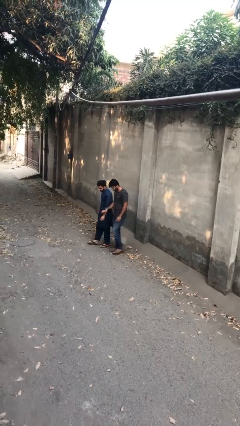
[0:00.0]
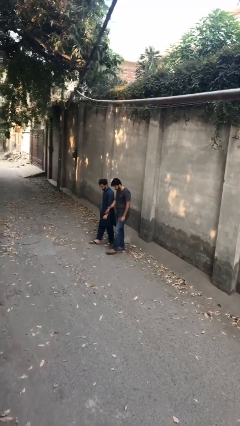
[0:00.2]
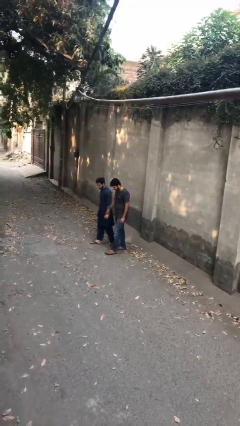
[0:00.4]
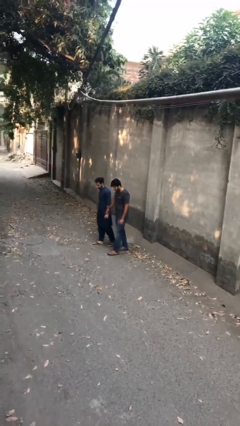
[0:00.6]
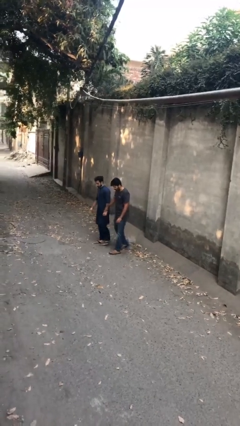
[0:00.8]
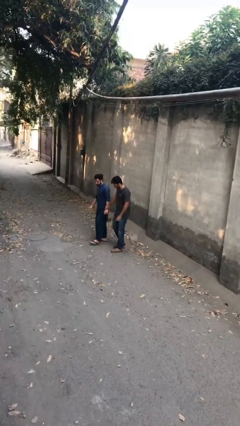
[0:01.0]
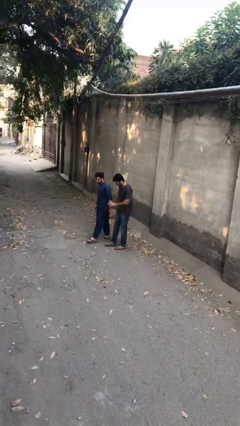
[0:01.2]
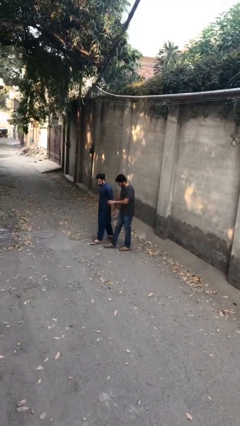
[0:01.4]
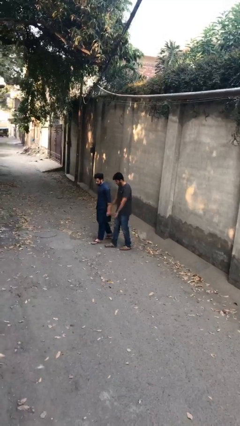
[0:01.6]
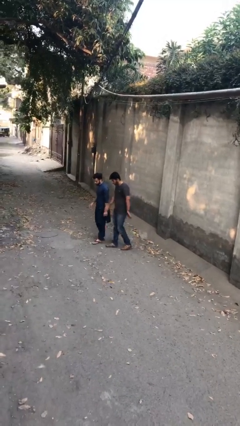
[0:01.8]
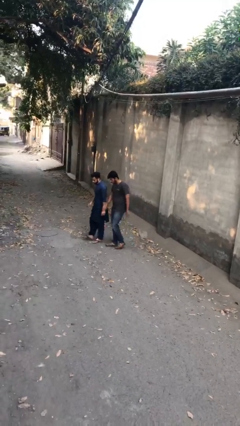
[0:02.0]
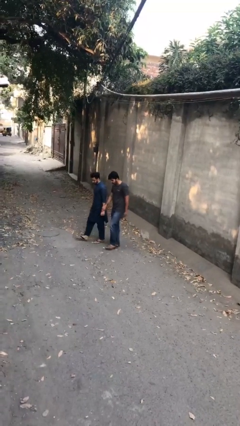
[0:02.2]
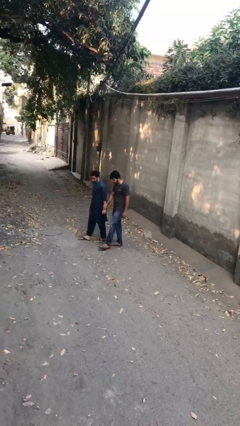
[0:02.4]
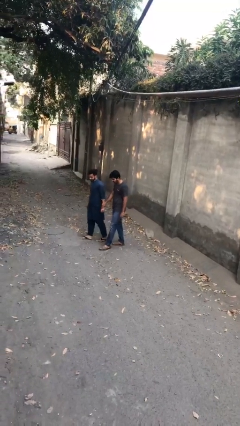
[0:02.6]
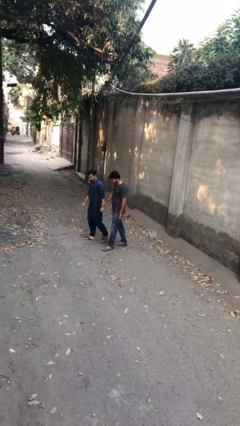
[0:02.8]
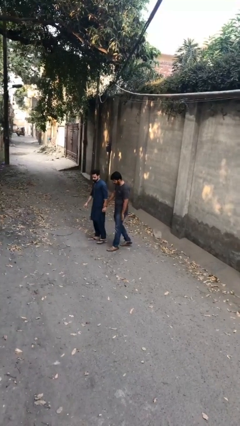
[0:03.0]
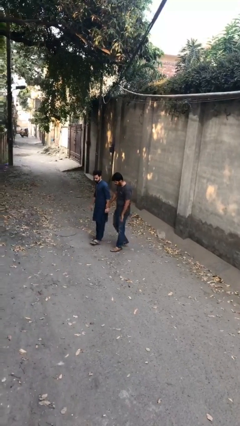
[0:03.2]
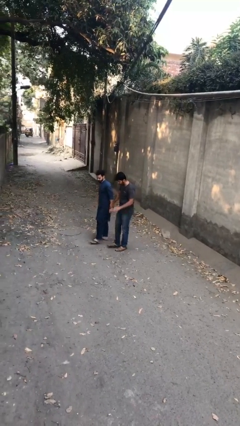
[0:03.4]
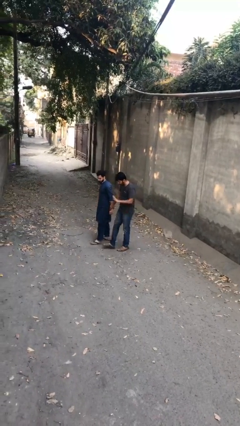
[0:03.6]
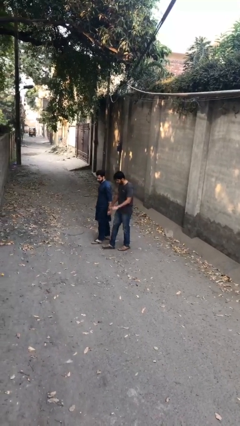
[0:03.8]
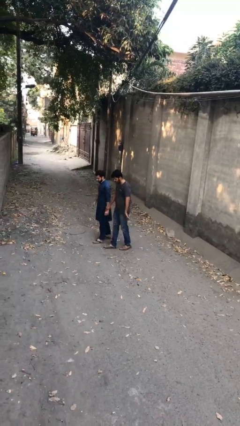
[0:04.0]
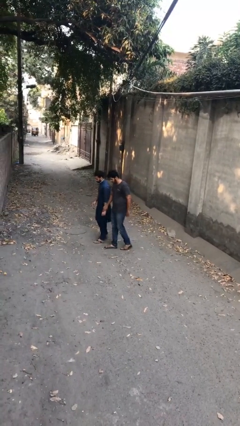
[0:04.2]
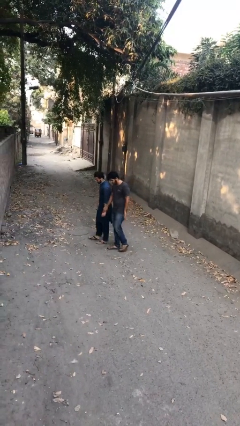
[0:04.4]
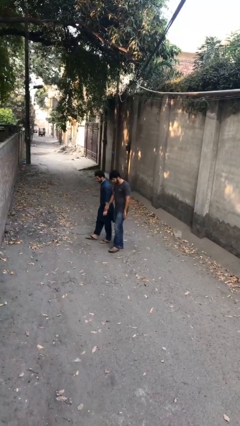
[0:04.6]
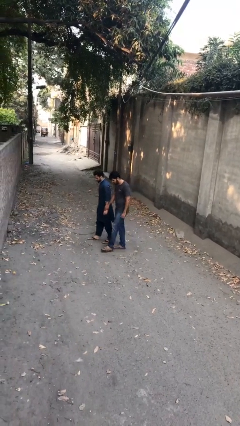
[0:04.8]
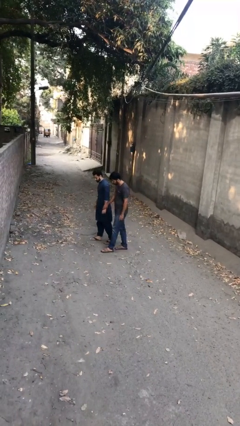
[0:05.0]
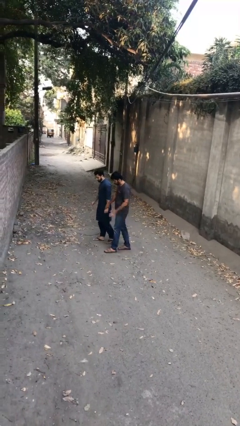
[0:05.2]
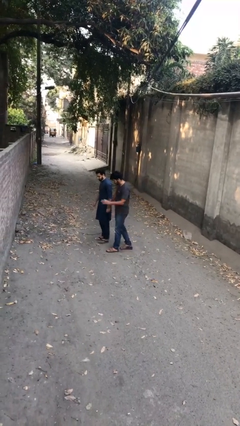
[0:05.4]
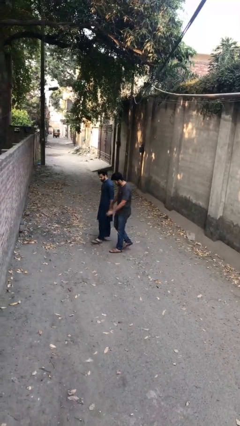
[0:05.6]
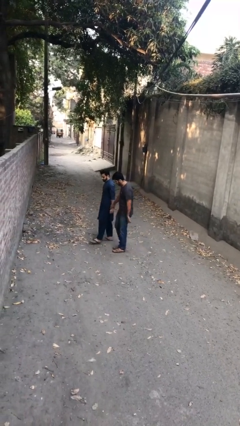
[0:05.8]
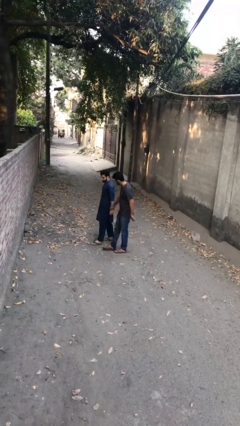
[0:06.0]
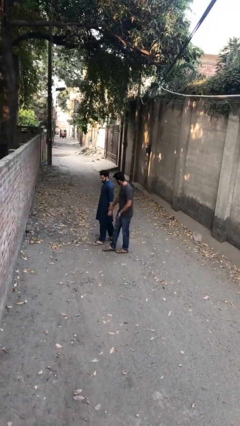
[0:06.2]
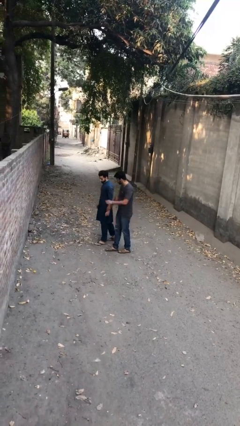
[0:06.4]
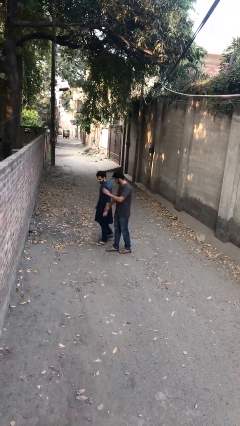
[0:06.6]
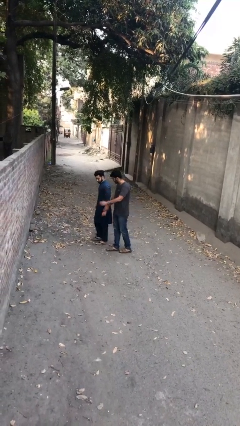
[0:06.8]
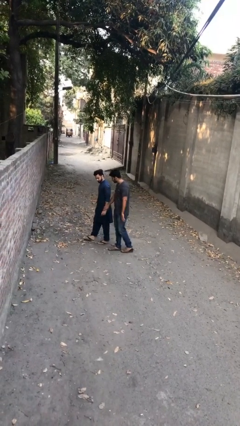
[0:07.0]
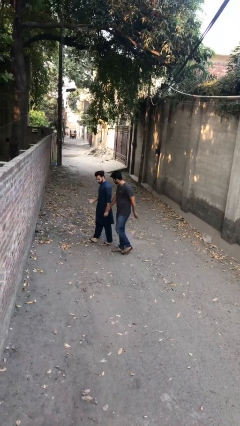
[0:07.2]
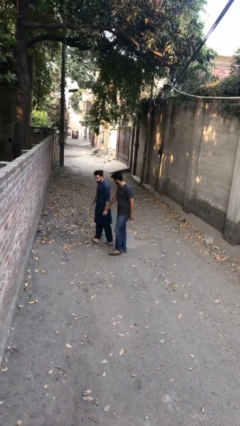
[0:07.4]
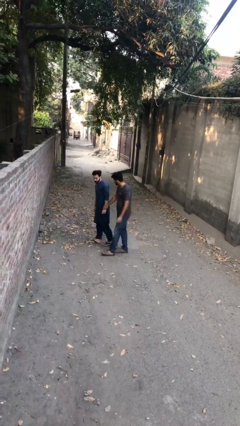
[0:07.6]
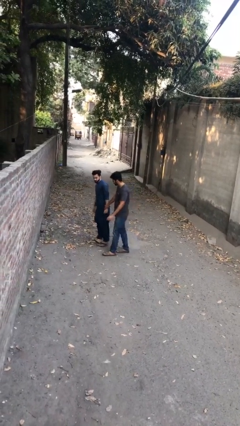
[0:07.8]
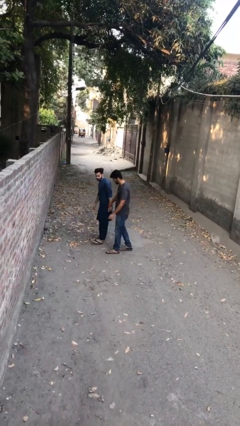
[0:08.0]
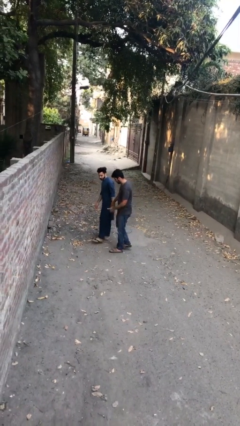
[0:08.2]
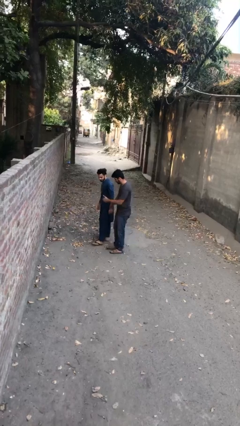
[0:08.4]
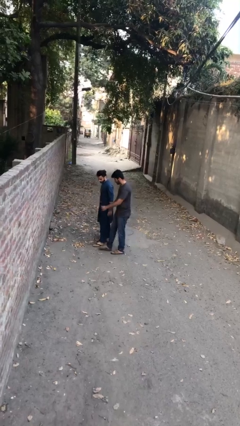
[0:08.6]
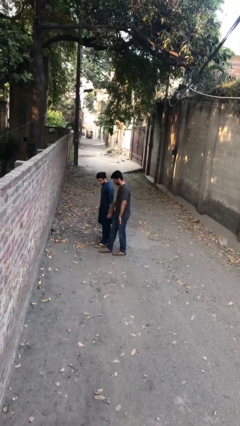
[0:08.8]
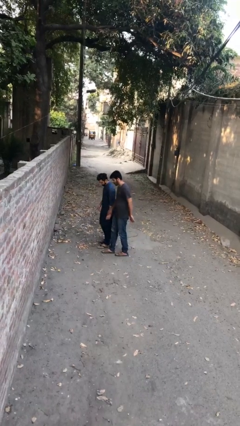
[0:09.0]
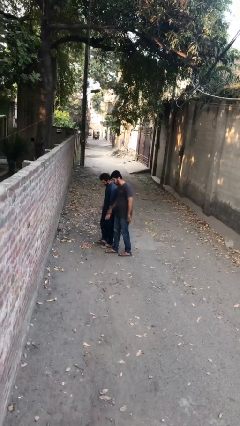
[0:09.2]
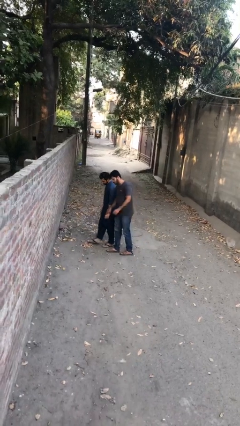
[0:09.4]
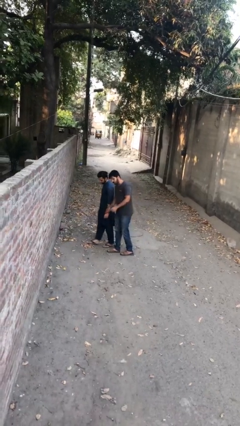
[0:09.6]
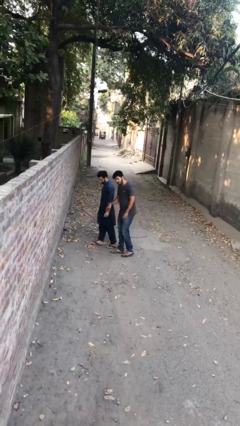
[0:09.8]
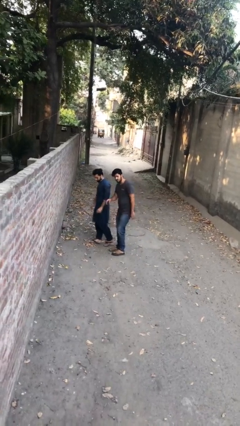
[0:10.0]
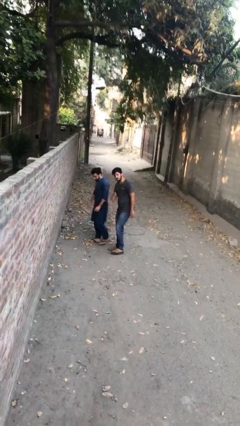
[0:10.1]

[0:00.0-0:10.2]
person holds hand

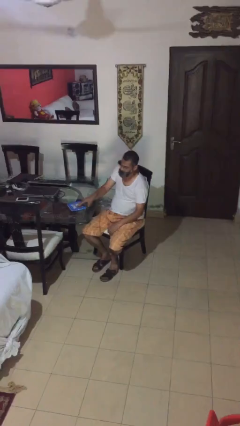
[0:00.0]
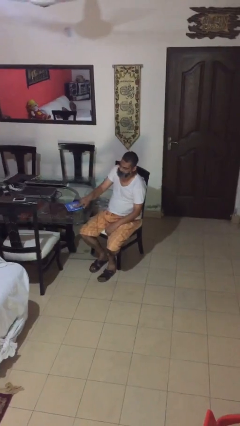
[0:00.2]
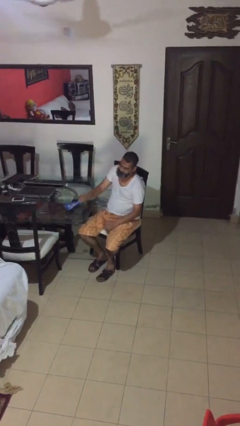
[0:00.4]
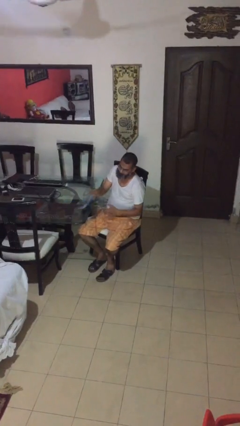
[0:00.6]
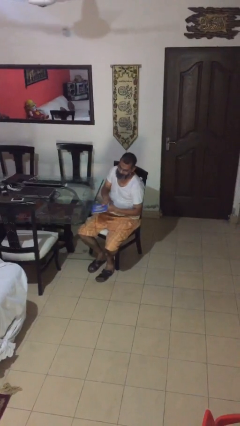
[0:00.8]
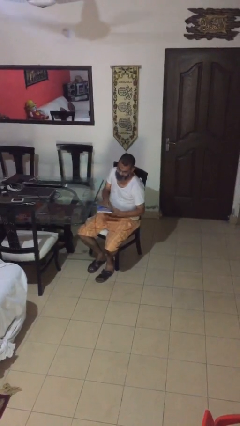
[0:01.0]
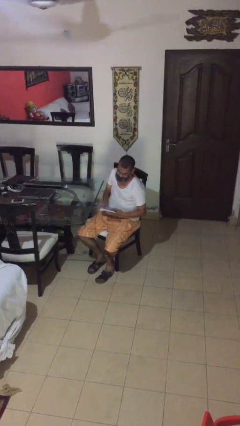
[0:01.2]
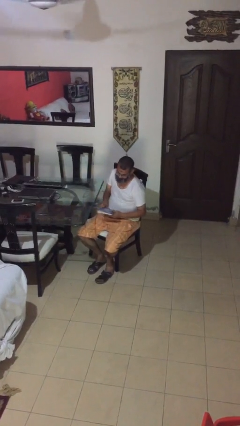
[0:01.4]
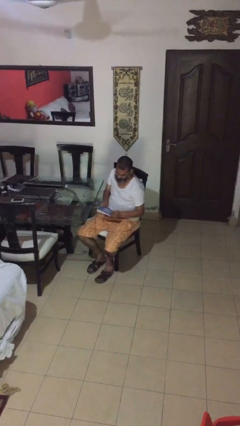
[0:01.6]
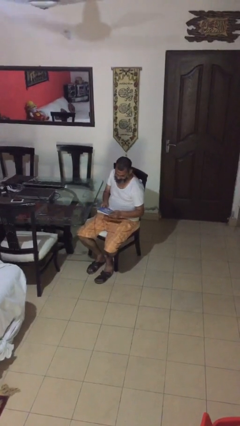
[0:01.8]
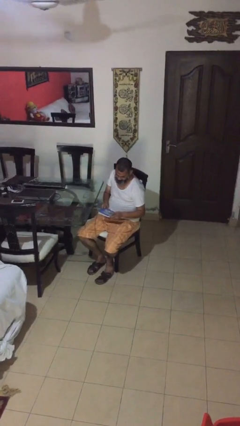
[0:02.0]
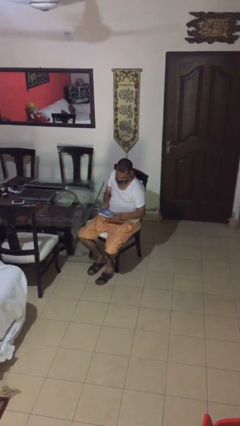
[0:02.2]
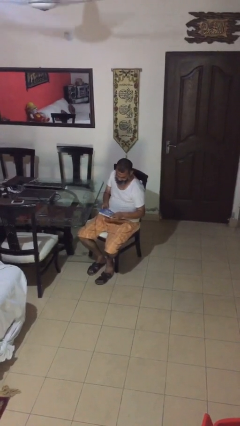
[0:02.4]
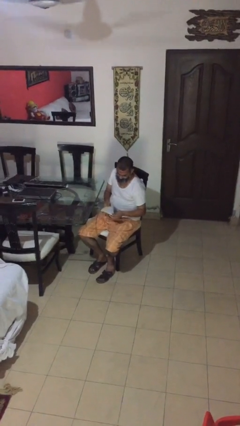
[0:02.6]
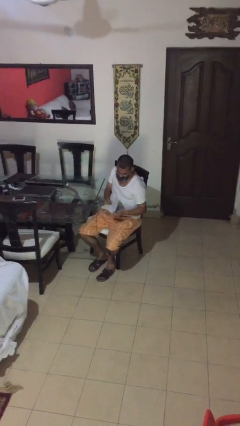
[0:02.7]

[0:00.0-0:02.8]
person picks up object from table

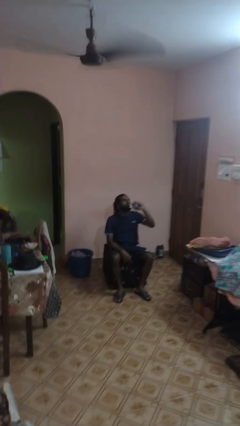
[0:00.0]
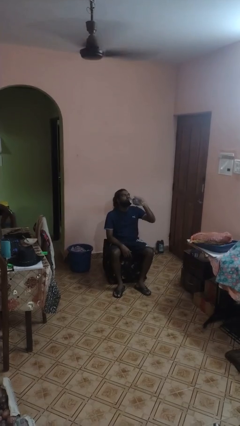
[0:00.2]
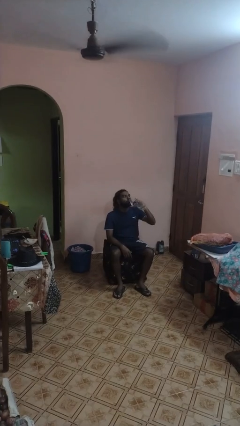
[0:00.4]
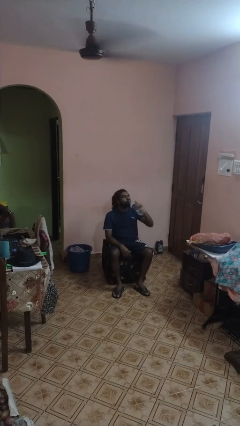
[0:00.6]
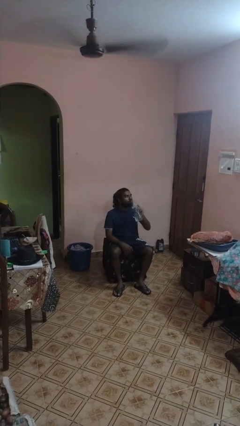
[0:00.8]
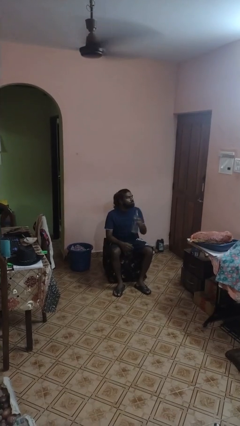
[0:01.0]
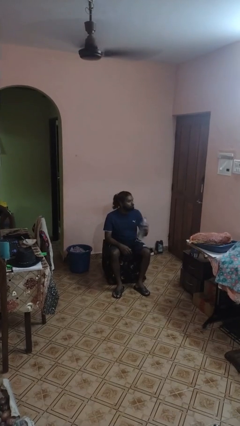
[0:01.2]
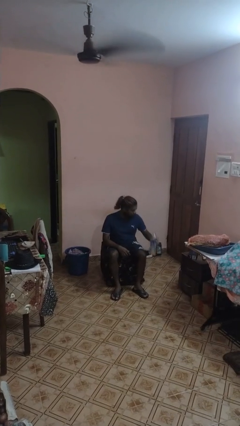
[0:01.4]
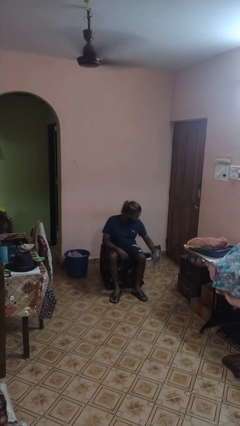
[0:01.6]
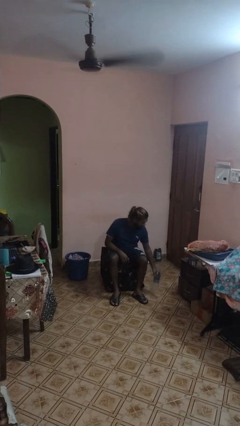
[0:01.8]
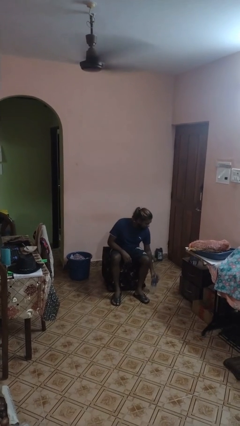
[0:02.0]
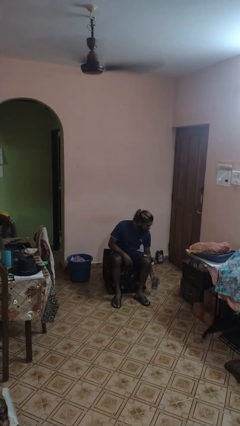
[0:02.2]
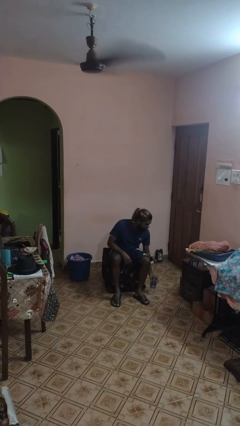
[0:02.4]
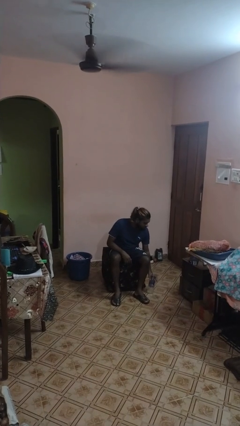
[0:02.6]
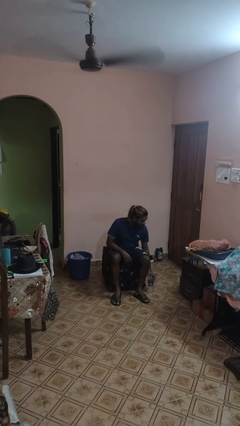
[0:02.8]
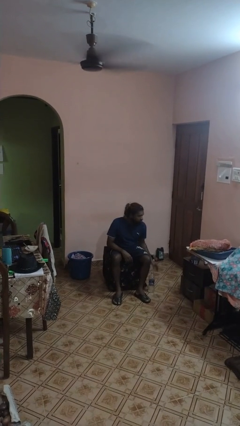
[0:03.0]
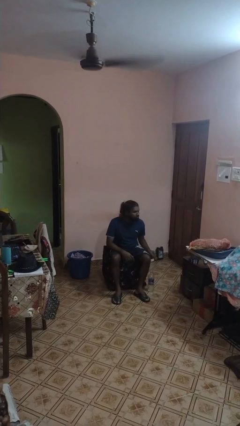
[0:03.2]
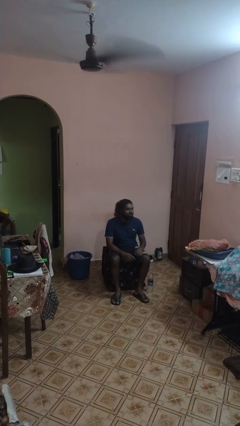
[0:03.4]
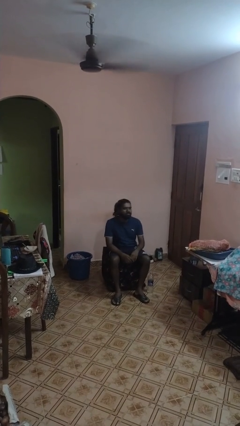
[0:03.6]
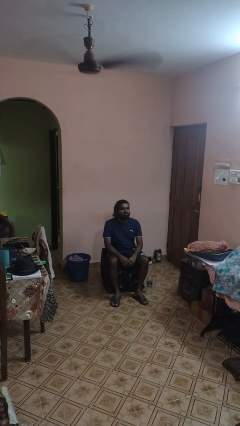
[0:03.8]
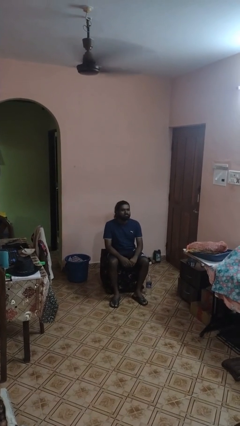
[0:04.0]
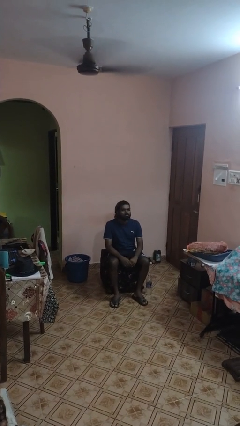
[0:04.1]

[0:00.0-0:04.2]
person drinks from bottle

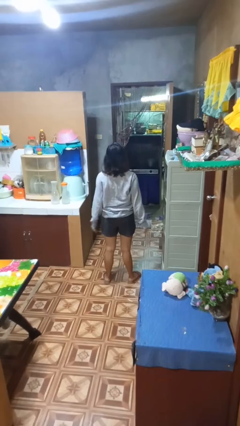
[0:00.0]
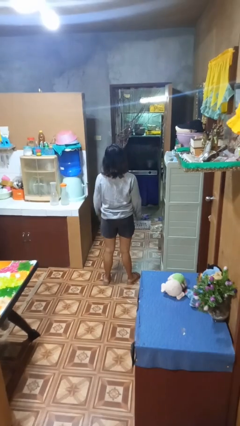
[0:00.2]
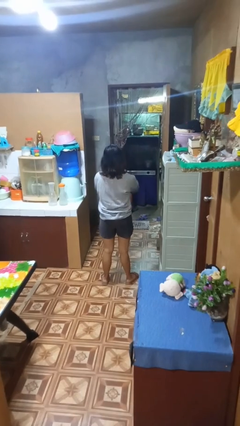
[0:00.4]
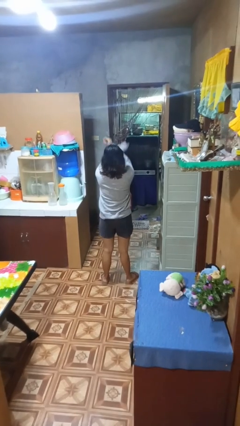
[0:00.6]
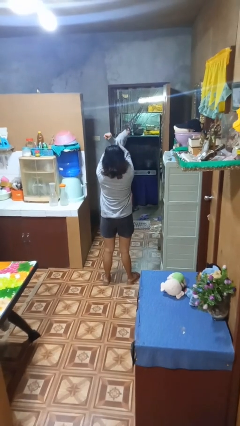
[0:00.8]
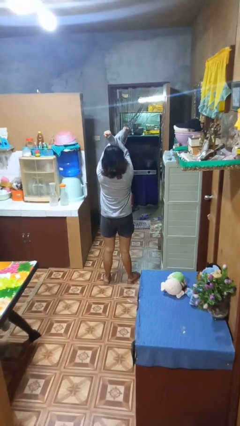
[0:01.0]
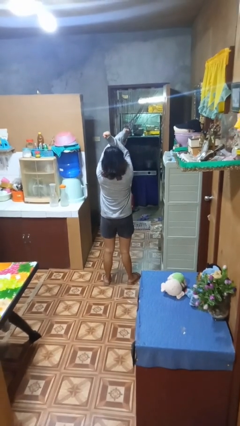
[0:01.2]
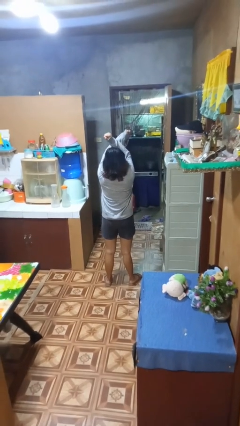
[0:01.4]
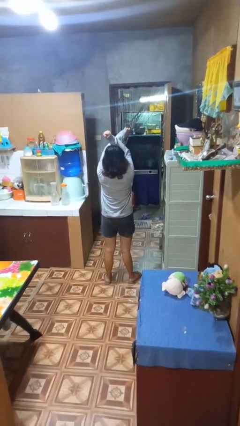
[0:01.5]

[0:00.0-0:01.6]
person gestures arms x
